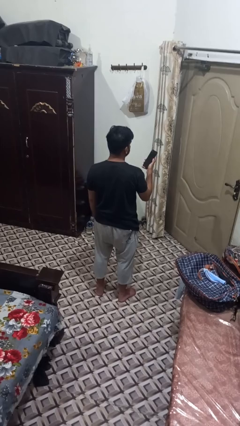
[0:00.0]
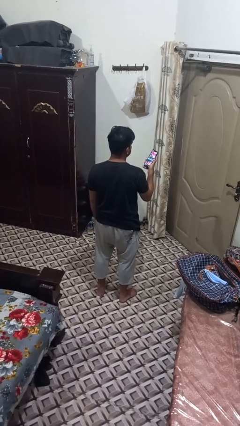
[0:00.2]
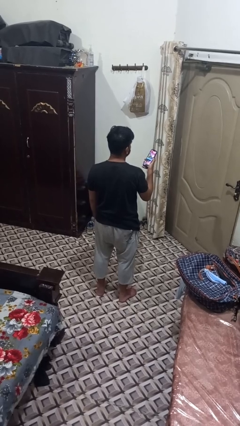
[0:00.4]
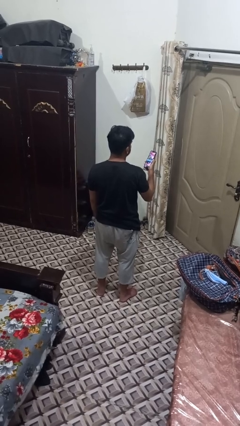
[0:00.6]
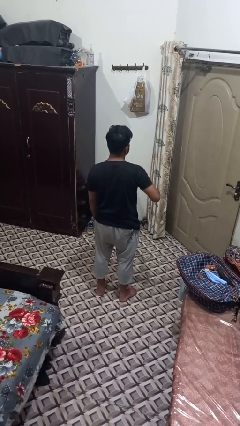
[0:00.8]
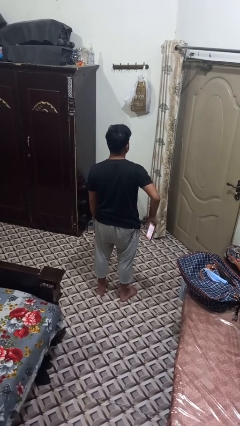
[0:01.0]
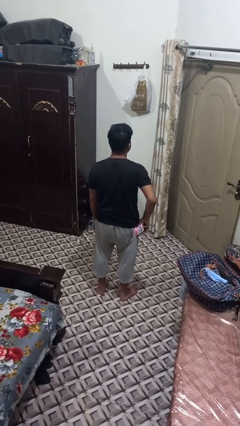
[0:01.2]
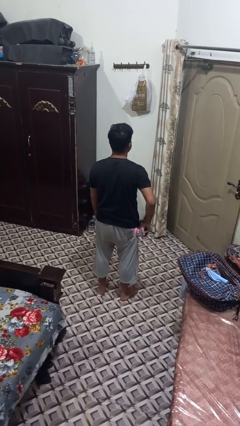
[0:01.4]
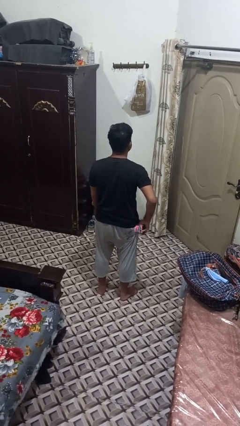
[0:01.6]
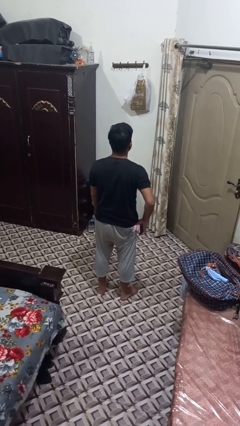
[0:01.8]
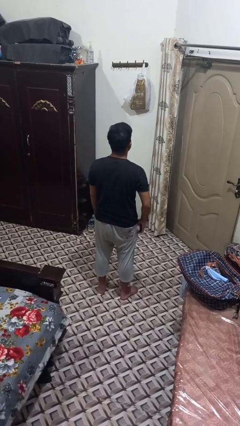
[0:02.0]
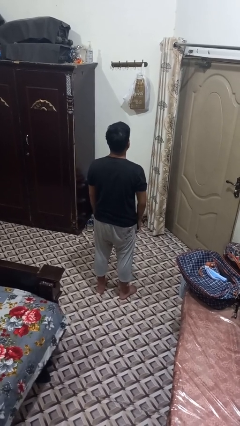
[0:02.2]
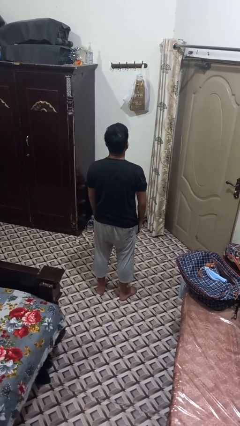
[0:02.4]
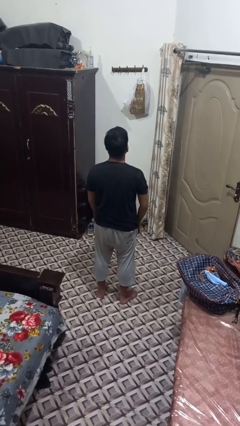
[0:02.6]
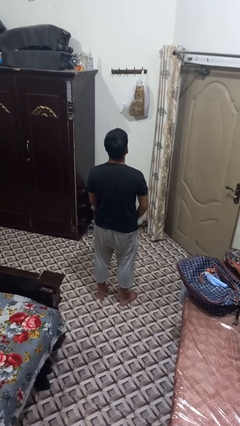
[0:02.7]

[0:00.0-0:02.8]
person puts phone into pocket

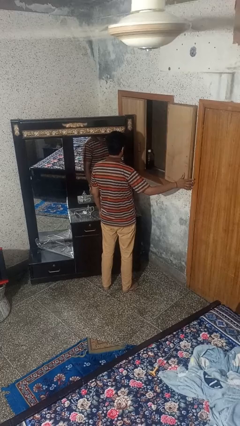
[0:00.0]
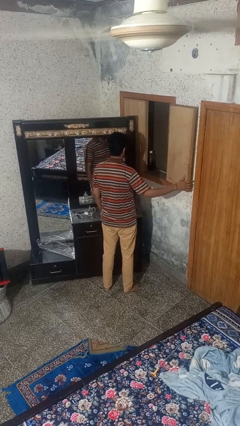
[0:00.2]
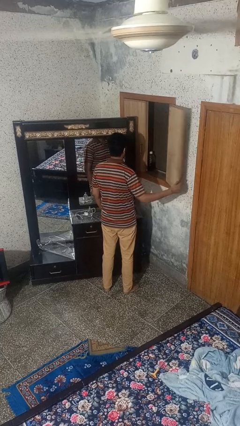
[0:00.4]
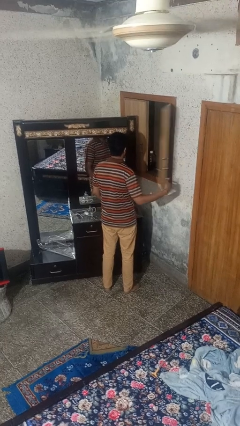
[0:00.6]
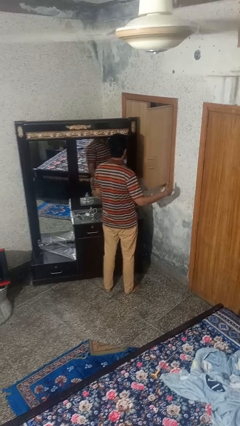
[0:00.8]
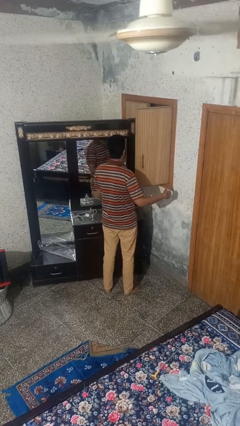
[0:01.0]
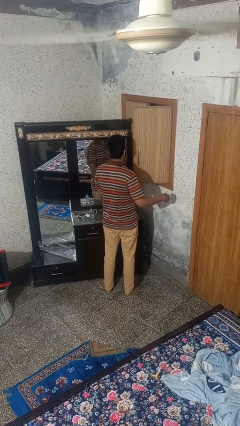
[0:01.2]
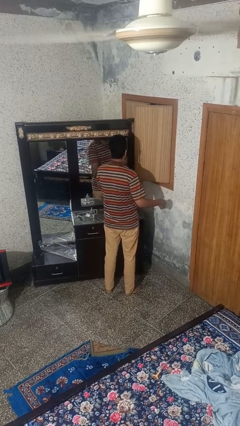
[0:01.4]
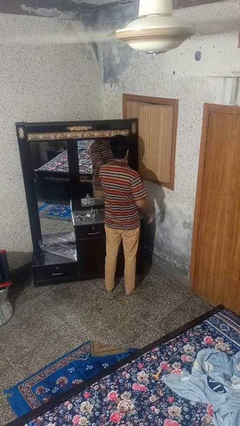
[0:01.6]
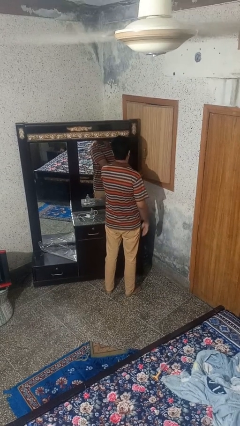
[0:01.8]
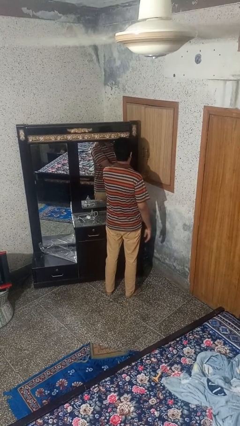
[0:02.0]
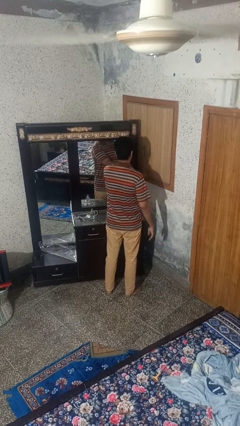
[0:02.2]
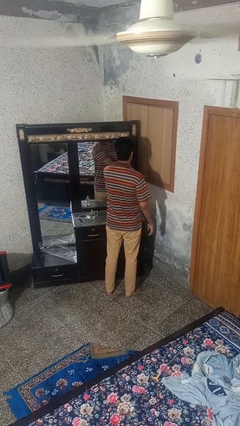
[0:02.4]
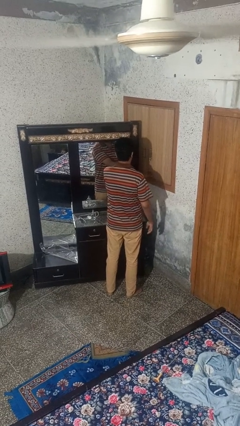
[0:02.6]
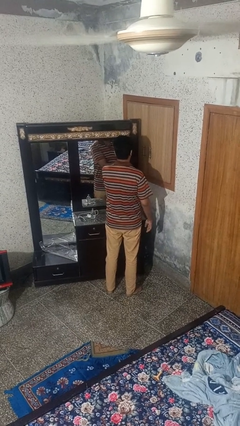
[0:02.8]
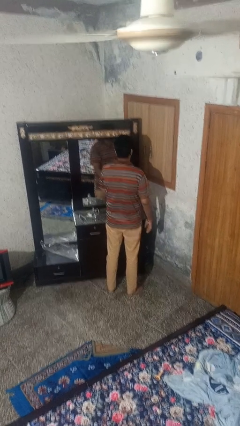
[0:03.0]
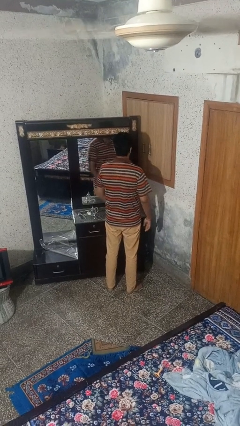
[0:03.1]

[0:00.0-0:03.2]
person closes home window

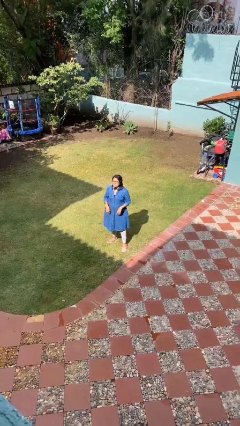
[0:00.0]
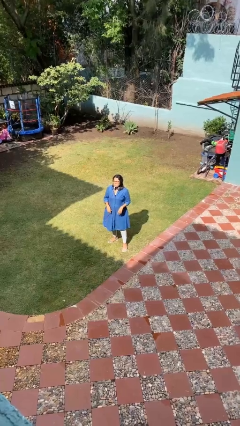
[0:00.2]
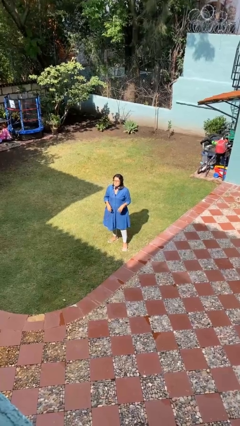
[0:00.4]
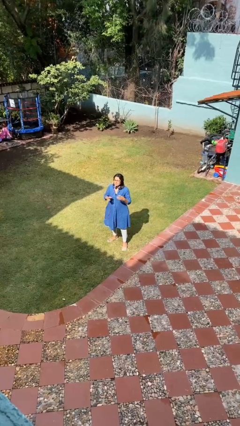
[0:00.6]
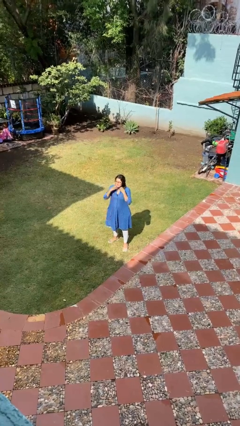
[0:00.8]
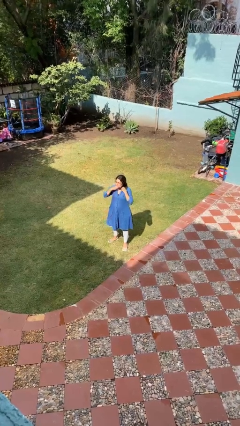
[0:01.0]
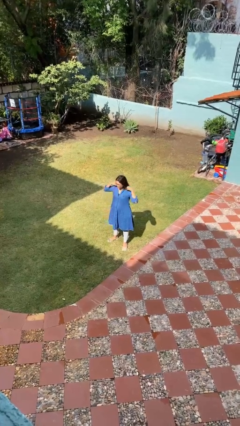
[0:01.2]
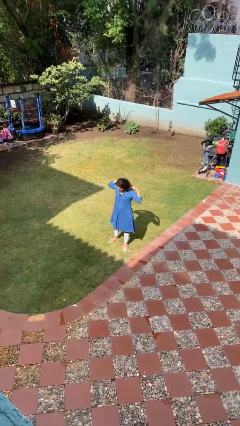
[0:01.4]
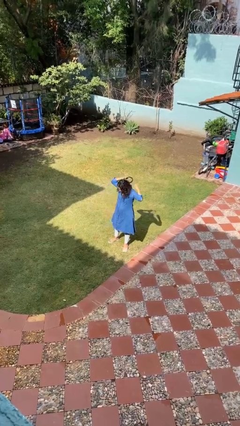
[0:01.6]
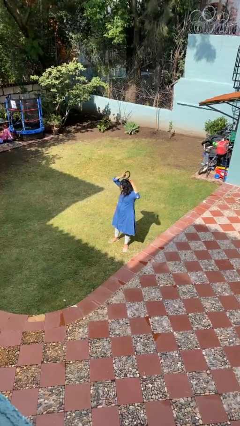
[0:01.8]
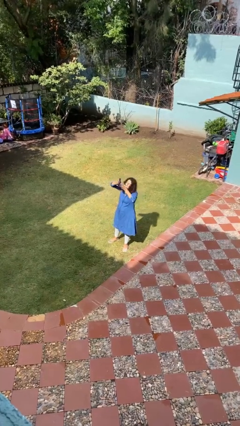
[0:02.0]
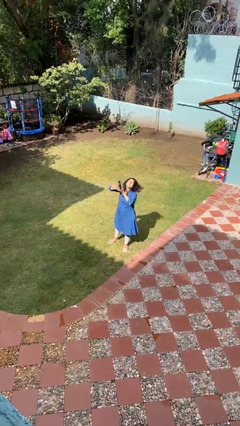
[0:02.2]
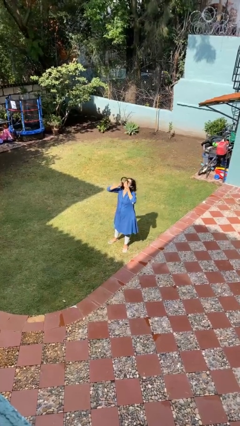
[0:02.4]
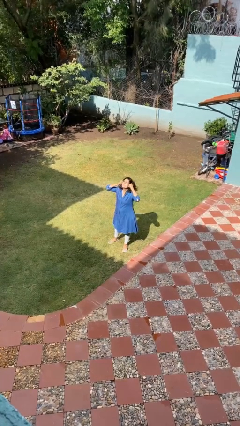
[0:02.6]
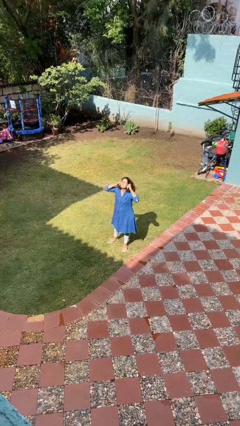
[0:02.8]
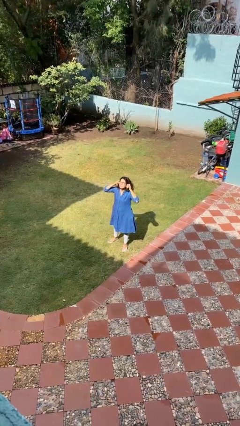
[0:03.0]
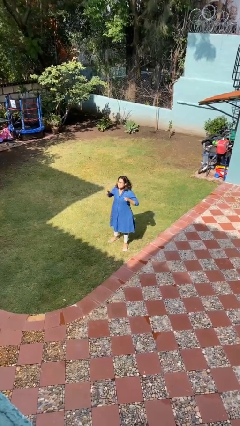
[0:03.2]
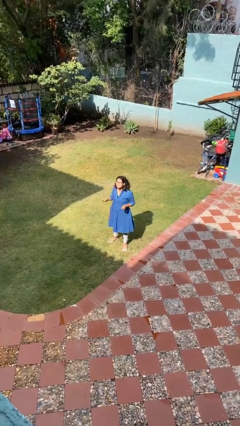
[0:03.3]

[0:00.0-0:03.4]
person puts on headphones

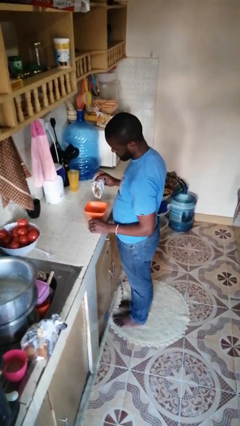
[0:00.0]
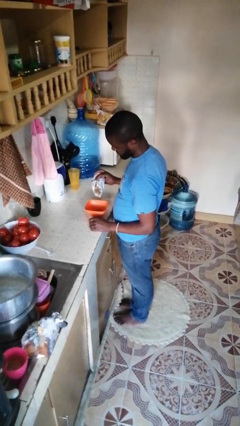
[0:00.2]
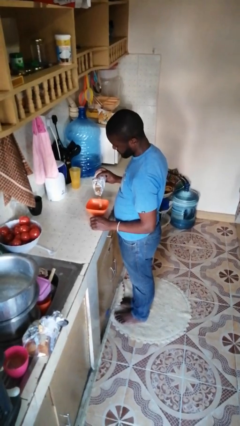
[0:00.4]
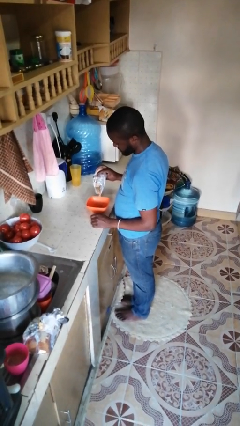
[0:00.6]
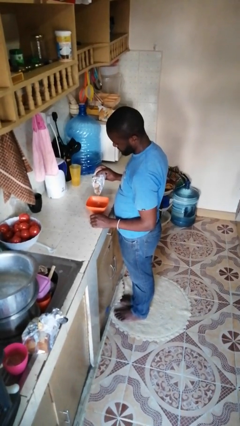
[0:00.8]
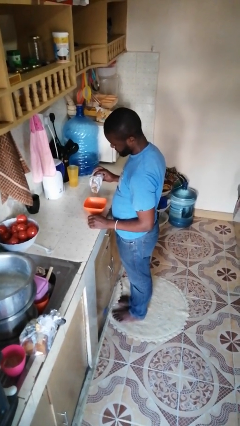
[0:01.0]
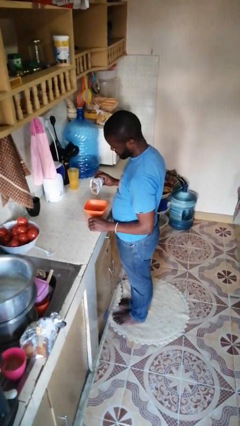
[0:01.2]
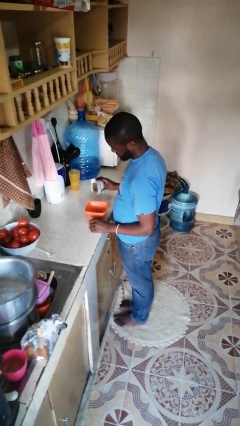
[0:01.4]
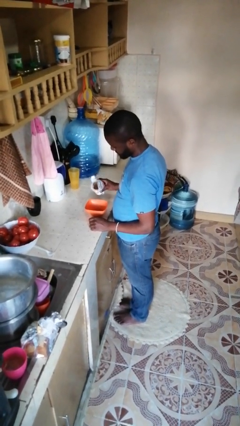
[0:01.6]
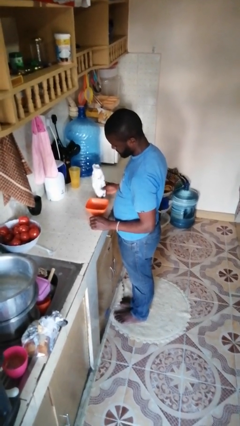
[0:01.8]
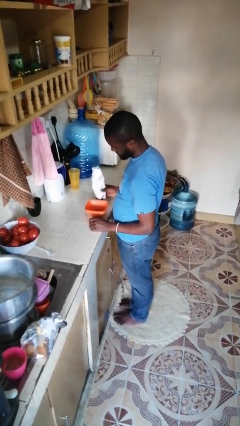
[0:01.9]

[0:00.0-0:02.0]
person pours into bowl

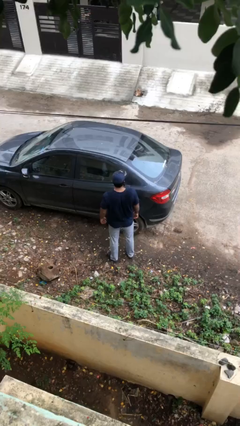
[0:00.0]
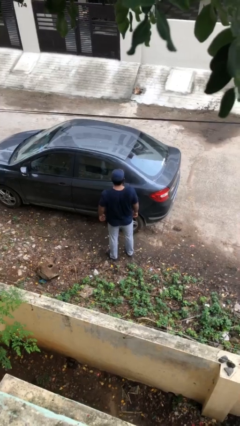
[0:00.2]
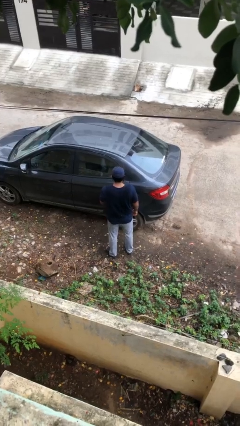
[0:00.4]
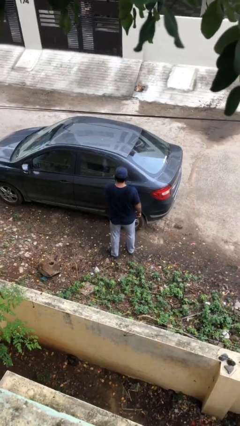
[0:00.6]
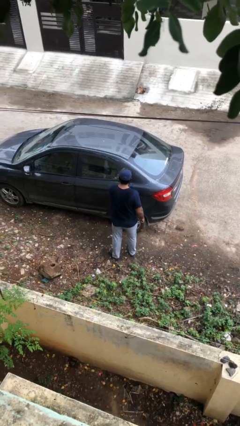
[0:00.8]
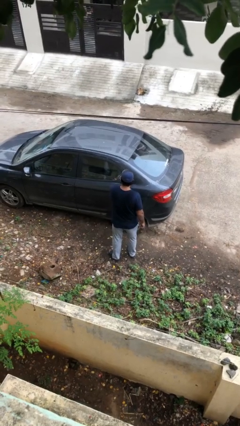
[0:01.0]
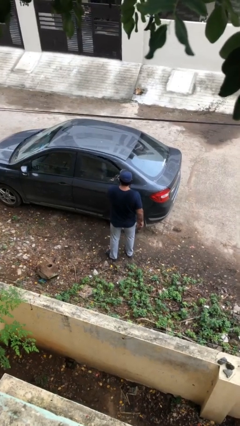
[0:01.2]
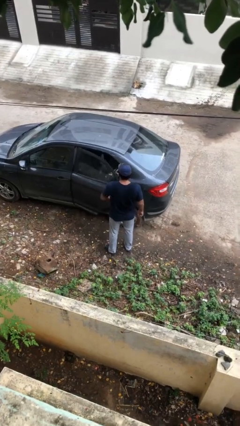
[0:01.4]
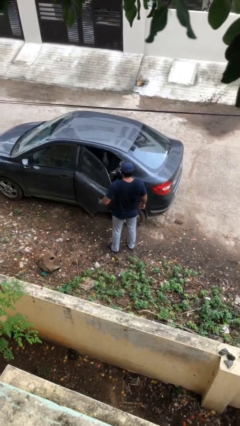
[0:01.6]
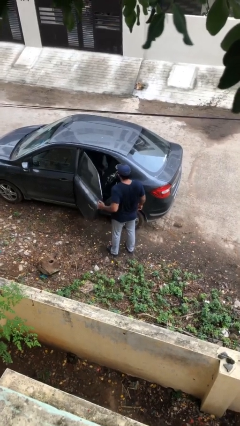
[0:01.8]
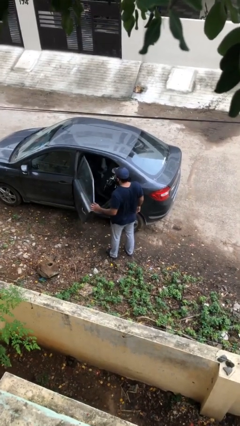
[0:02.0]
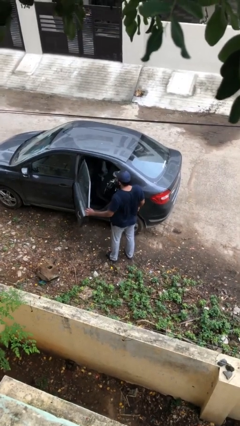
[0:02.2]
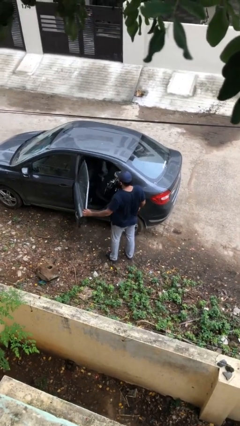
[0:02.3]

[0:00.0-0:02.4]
person opens car door

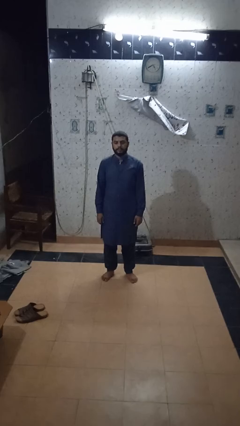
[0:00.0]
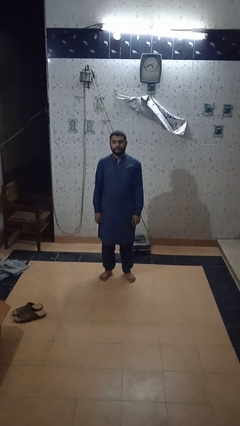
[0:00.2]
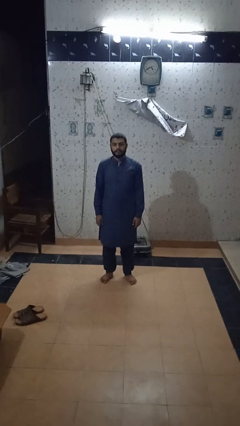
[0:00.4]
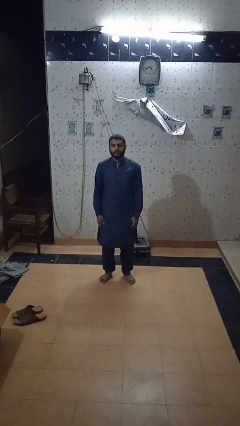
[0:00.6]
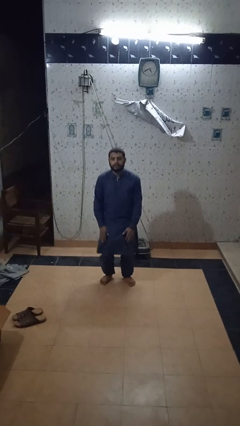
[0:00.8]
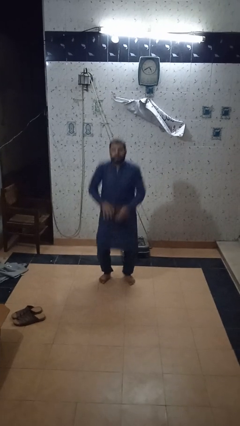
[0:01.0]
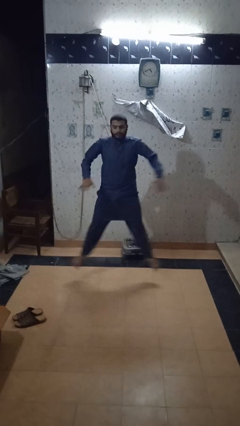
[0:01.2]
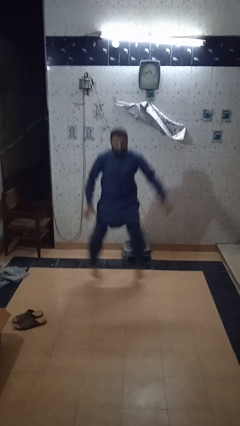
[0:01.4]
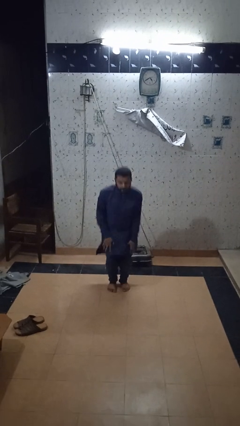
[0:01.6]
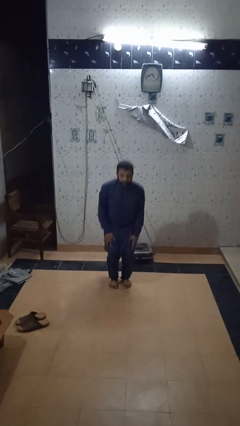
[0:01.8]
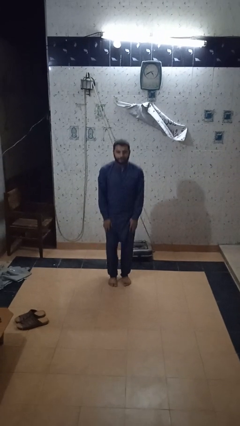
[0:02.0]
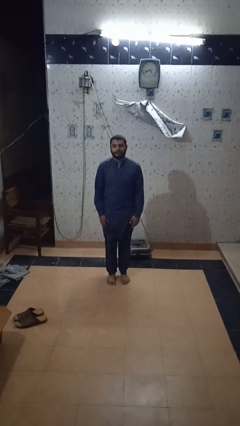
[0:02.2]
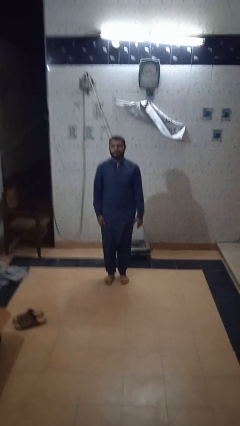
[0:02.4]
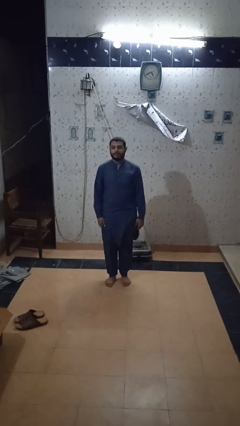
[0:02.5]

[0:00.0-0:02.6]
person exercises with jumping jacks

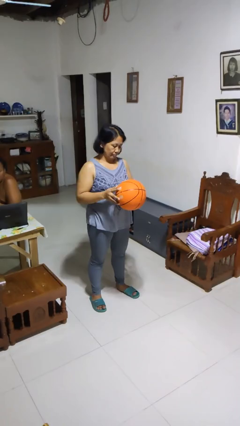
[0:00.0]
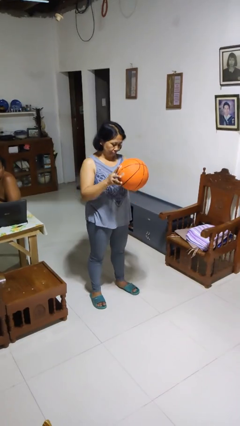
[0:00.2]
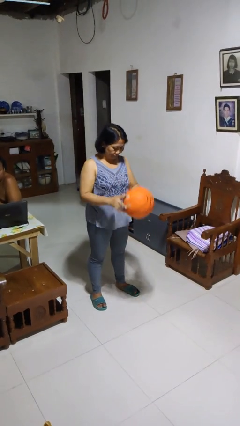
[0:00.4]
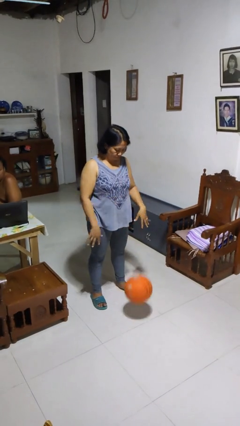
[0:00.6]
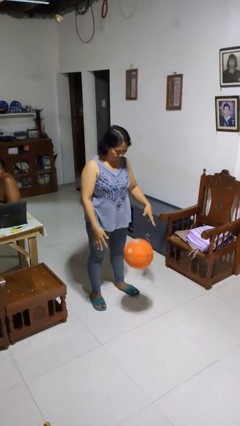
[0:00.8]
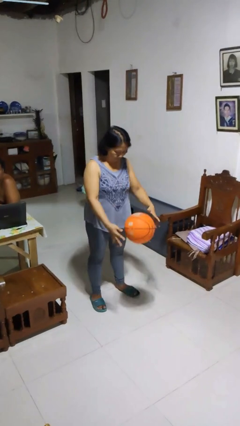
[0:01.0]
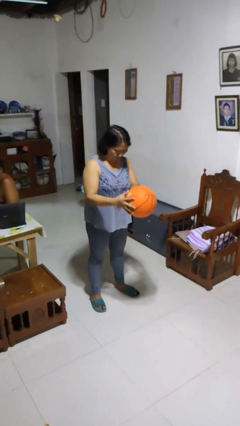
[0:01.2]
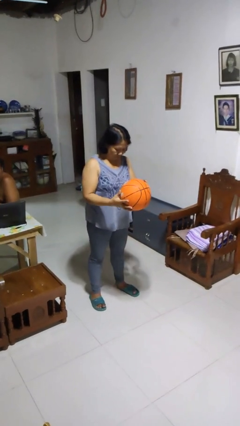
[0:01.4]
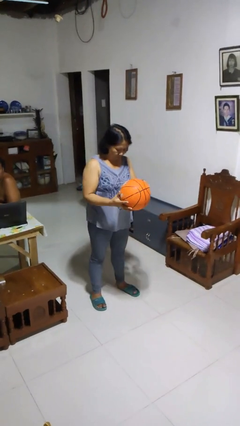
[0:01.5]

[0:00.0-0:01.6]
person bounces ball on floor
